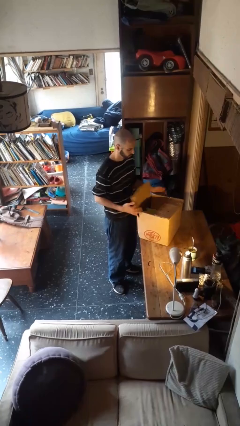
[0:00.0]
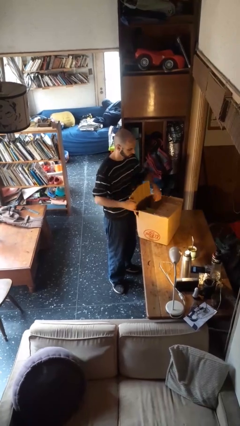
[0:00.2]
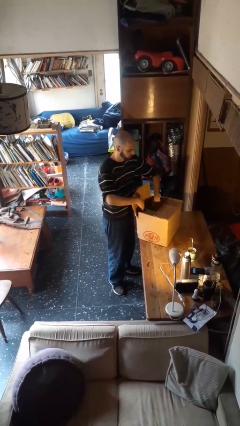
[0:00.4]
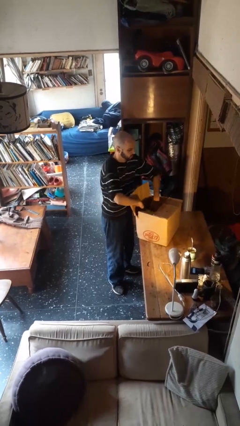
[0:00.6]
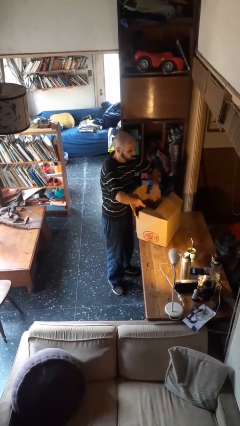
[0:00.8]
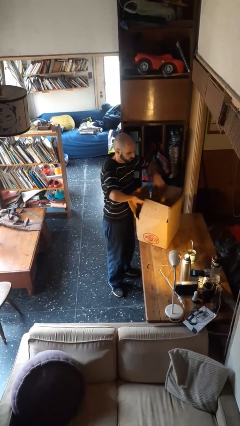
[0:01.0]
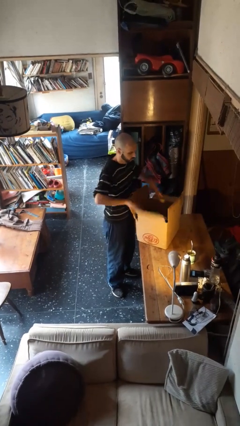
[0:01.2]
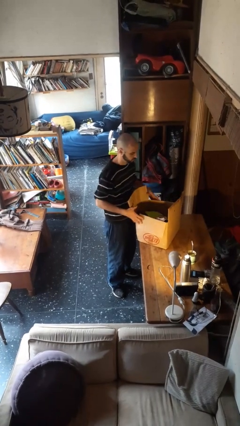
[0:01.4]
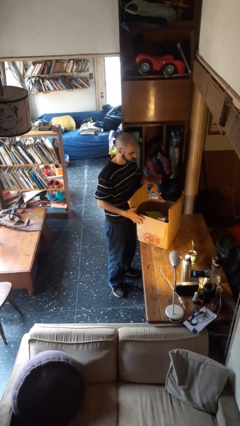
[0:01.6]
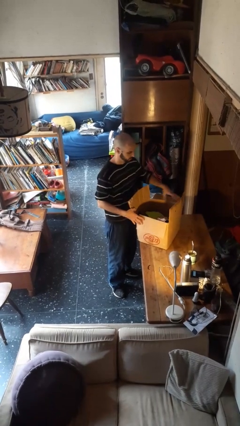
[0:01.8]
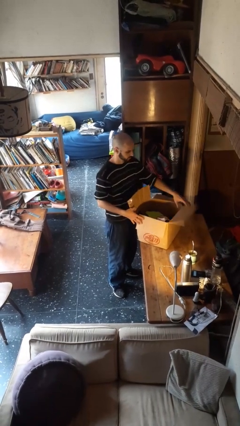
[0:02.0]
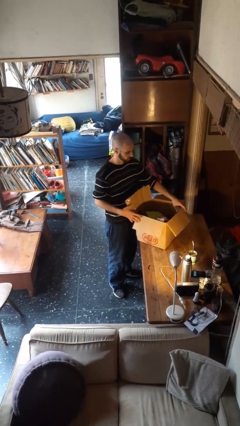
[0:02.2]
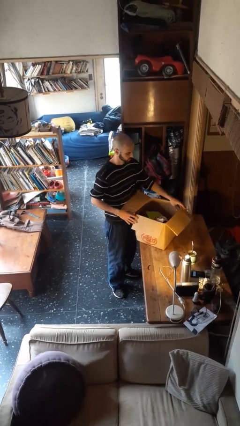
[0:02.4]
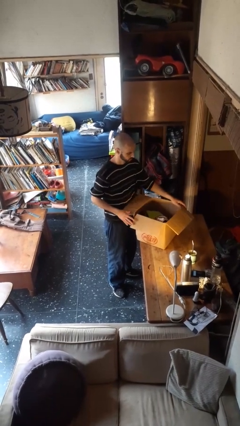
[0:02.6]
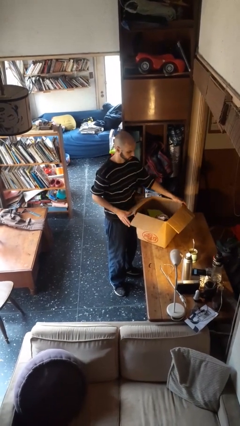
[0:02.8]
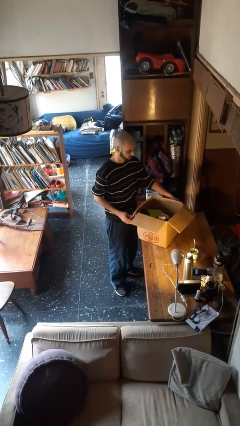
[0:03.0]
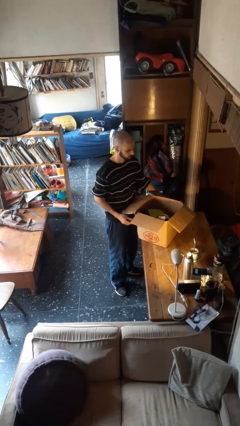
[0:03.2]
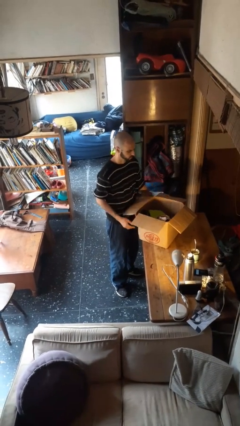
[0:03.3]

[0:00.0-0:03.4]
person opens box

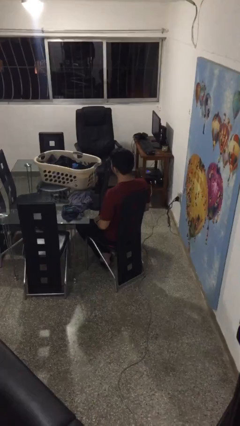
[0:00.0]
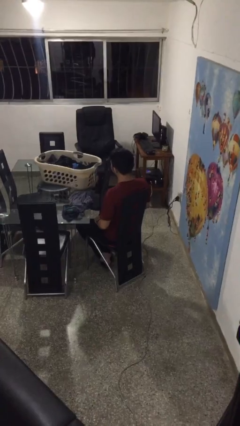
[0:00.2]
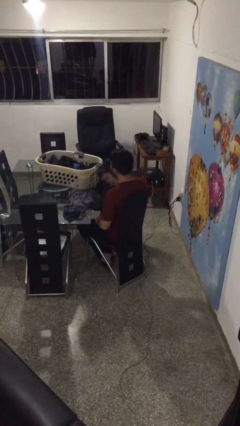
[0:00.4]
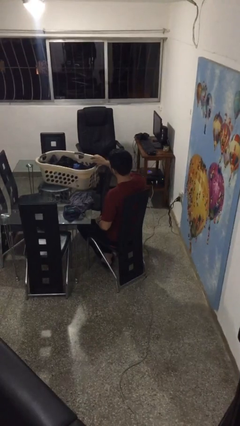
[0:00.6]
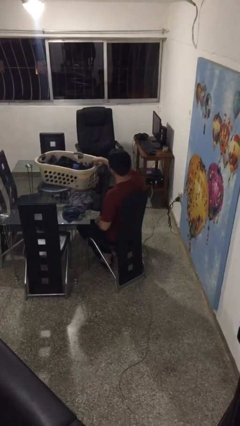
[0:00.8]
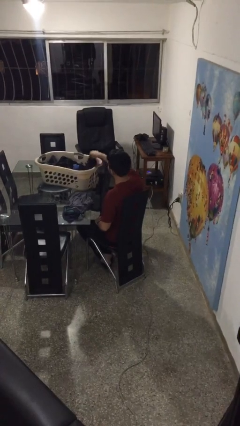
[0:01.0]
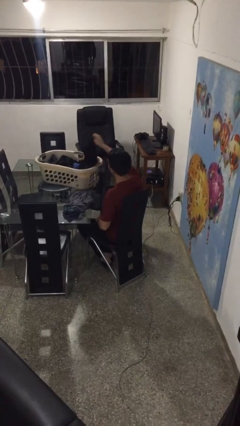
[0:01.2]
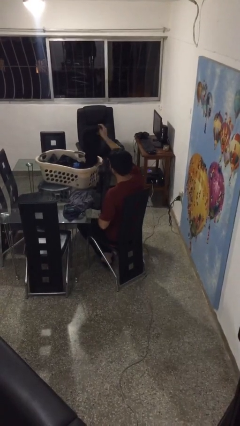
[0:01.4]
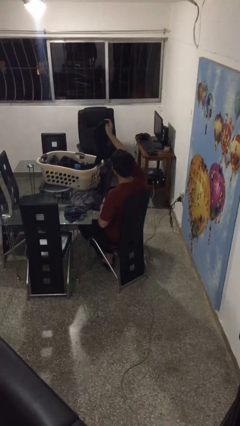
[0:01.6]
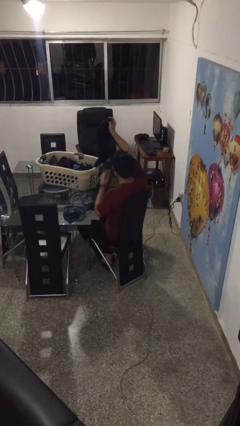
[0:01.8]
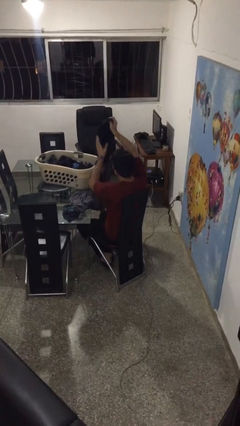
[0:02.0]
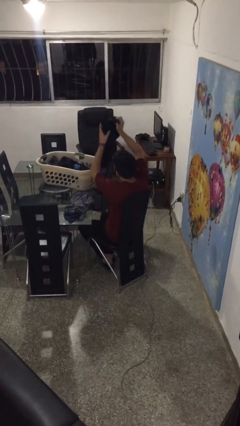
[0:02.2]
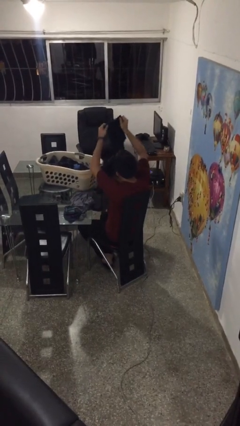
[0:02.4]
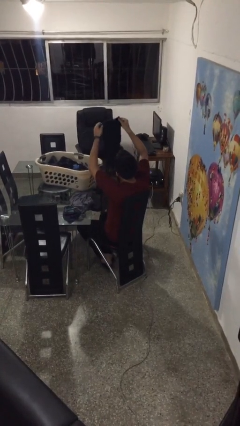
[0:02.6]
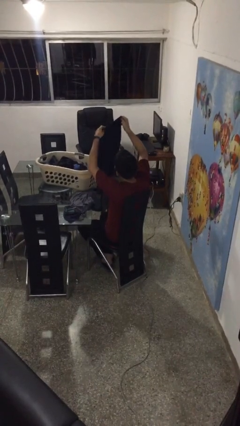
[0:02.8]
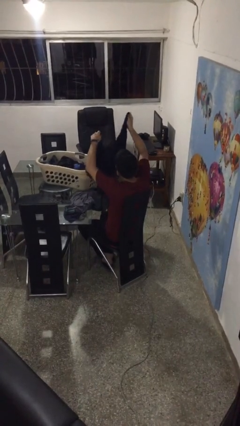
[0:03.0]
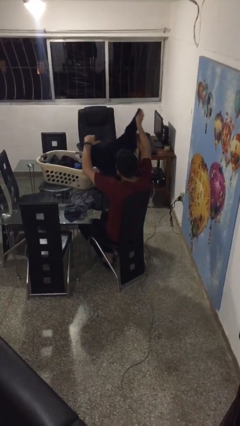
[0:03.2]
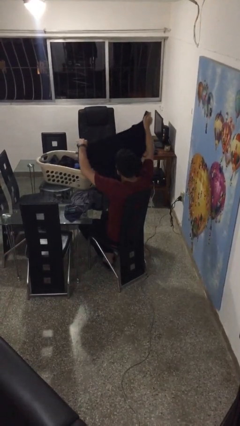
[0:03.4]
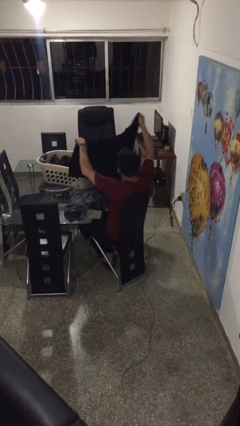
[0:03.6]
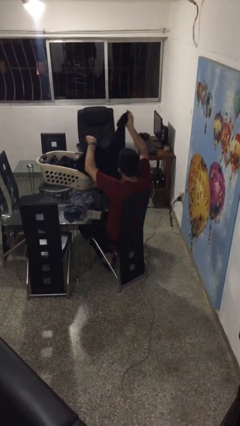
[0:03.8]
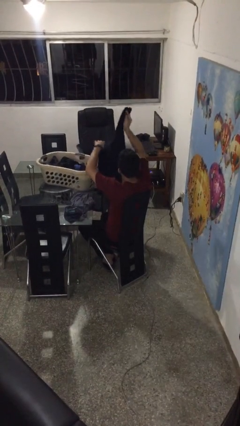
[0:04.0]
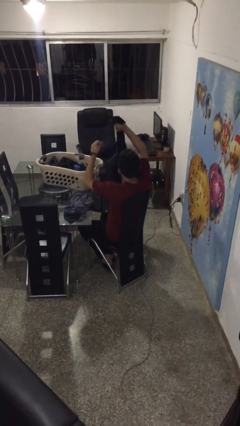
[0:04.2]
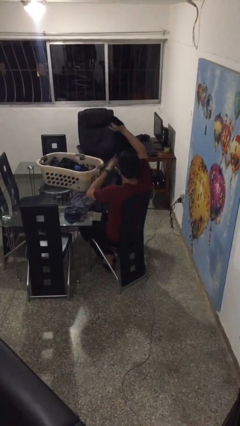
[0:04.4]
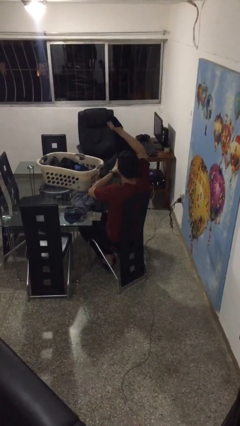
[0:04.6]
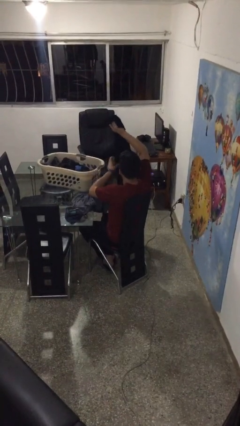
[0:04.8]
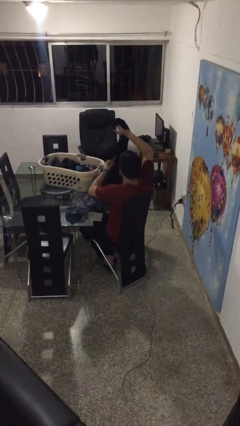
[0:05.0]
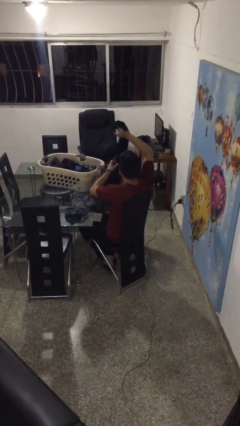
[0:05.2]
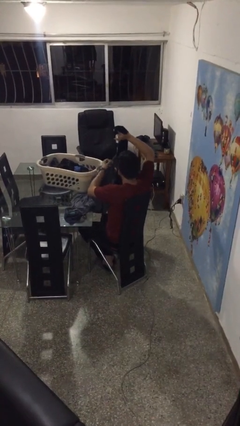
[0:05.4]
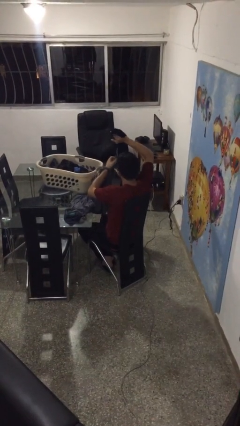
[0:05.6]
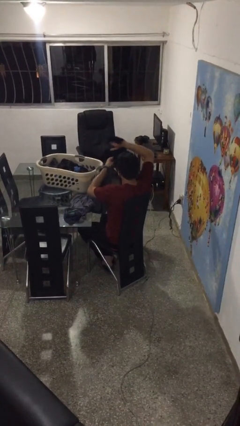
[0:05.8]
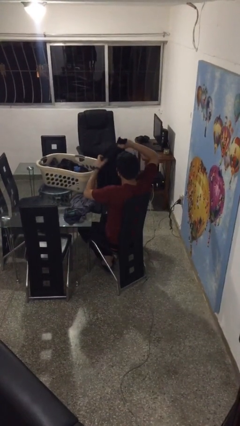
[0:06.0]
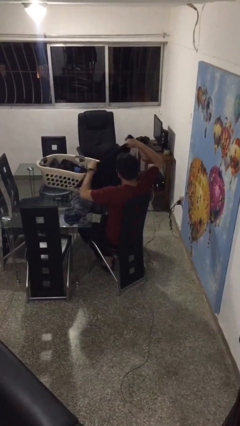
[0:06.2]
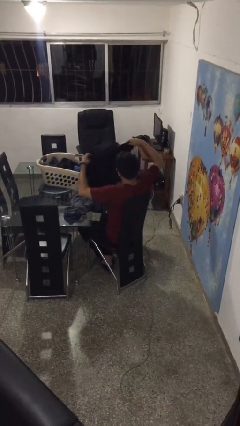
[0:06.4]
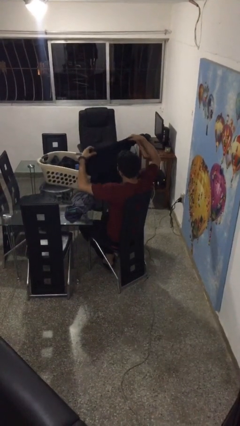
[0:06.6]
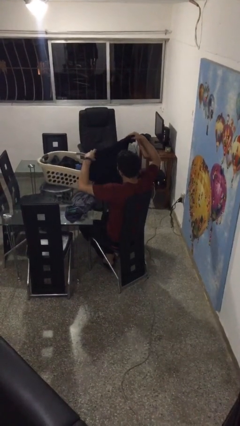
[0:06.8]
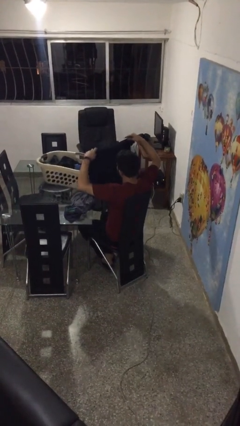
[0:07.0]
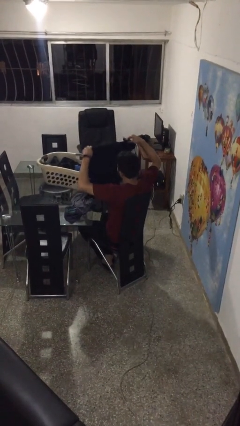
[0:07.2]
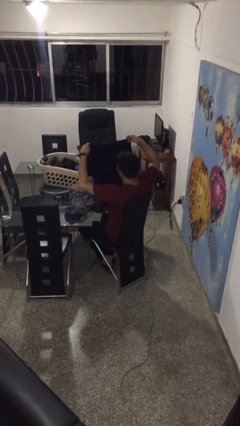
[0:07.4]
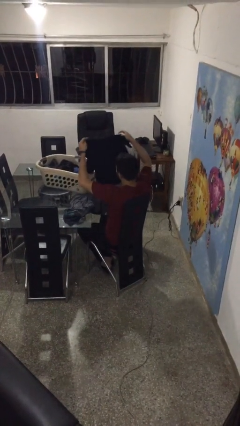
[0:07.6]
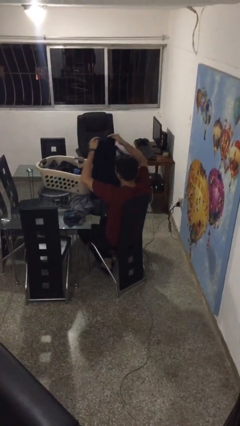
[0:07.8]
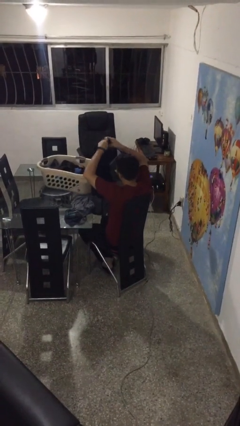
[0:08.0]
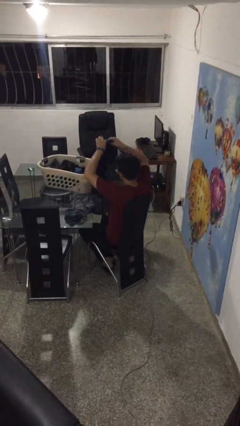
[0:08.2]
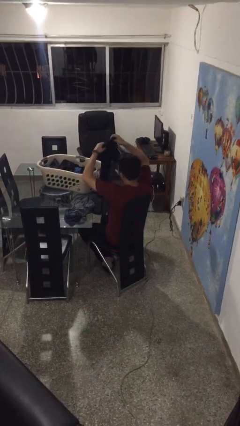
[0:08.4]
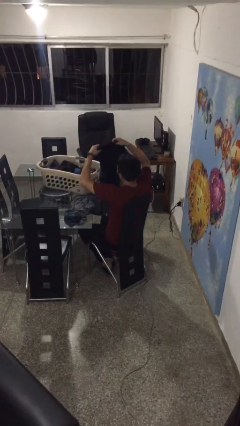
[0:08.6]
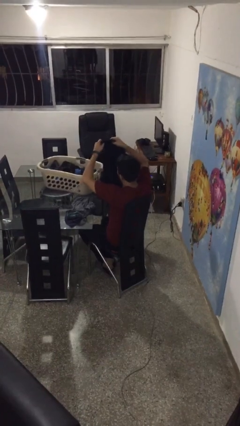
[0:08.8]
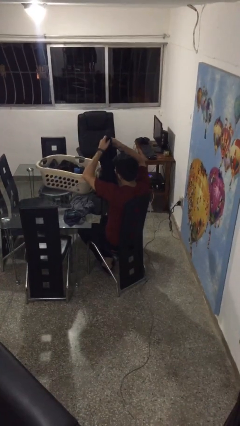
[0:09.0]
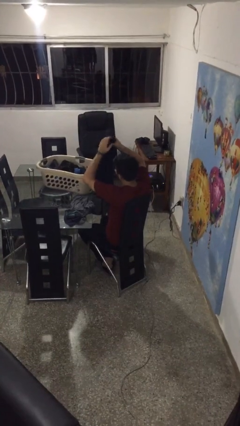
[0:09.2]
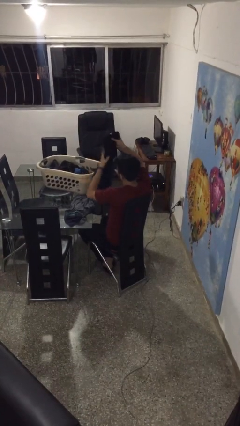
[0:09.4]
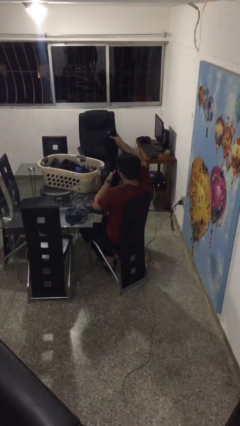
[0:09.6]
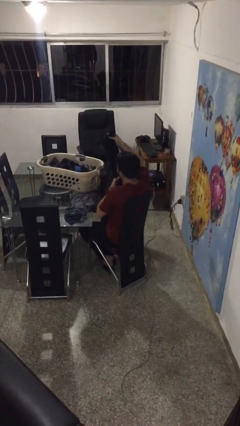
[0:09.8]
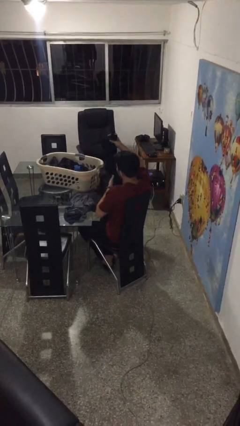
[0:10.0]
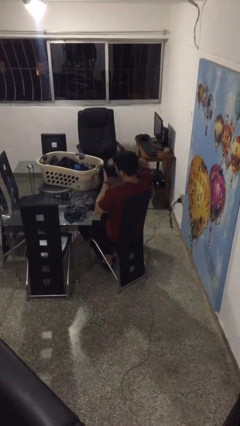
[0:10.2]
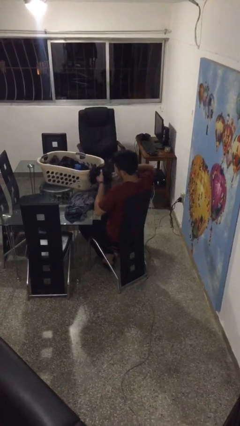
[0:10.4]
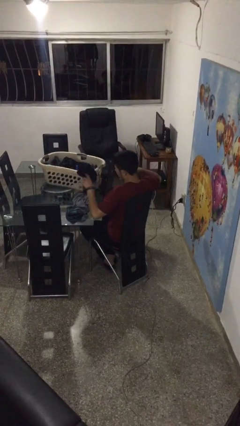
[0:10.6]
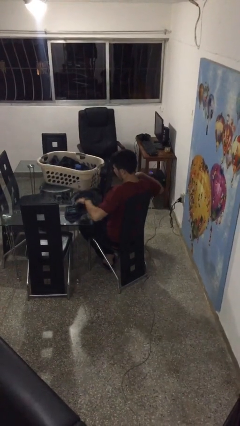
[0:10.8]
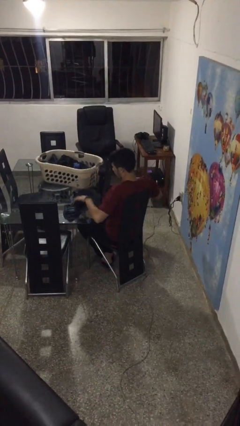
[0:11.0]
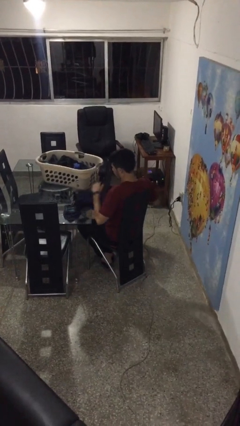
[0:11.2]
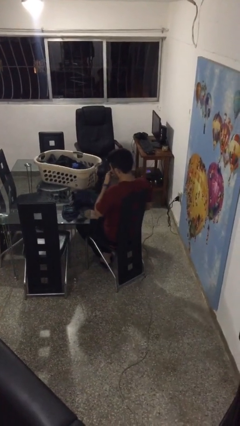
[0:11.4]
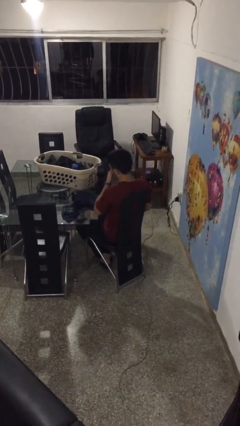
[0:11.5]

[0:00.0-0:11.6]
person folds shirt

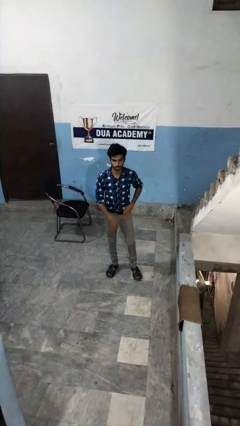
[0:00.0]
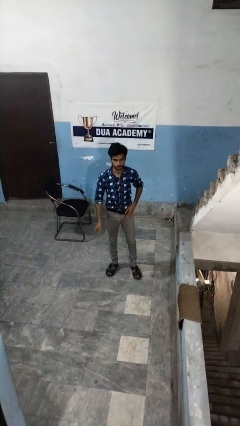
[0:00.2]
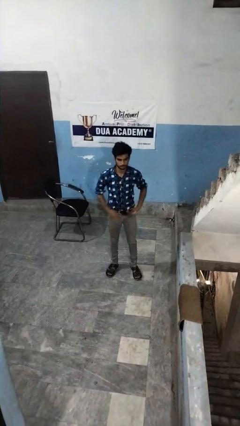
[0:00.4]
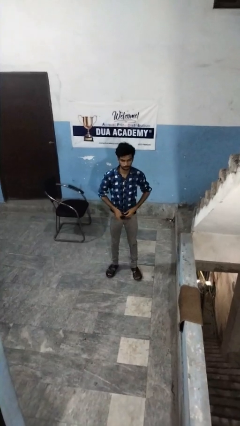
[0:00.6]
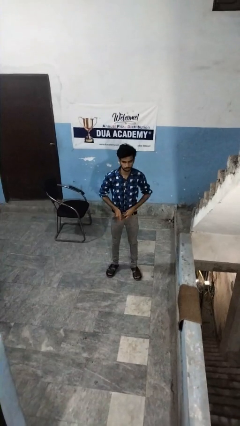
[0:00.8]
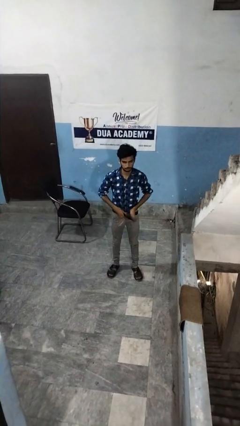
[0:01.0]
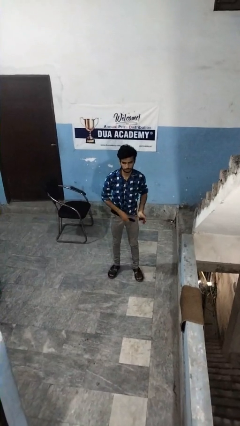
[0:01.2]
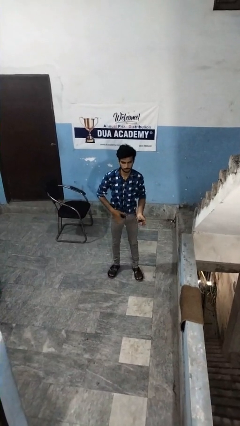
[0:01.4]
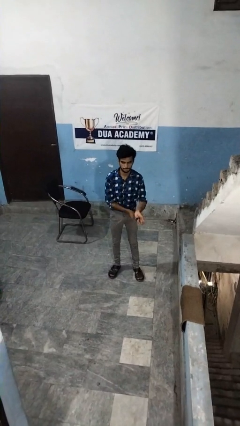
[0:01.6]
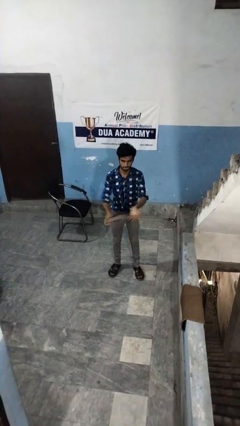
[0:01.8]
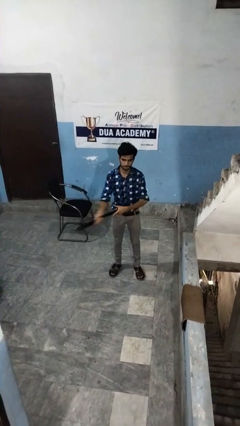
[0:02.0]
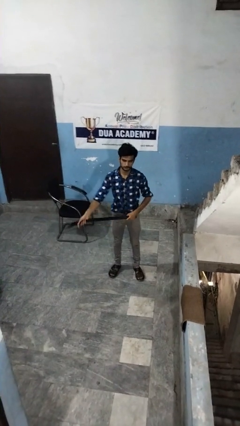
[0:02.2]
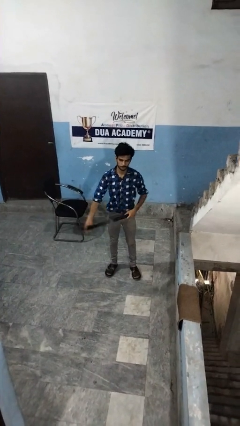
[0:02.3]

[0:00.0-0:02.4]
person takes off belt
